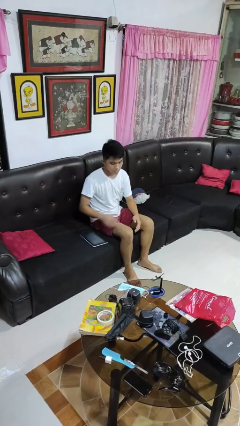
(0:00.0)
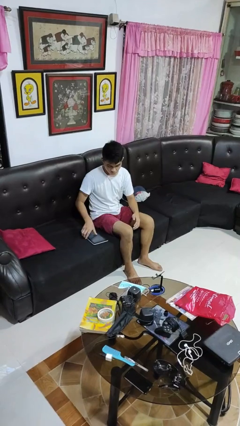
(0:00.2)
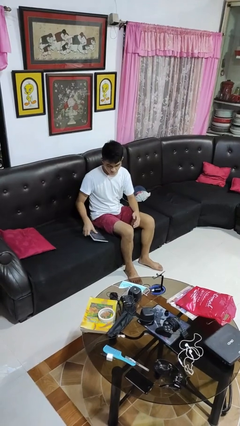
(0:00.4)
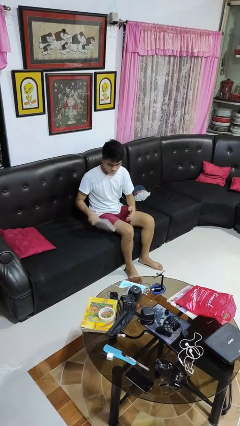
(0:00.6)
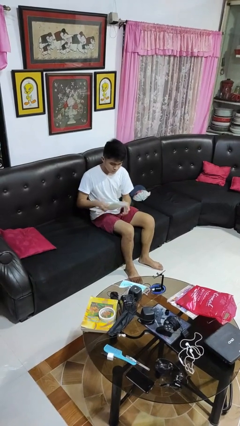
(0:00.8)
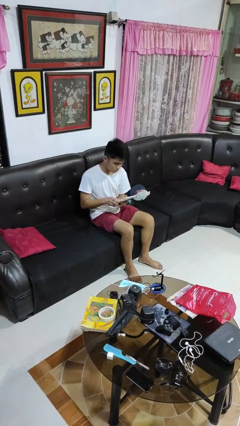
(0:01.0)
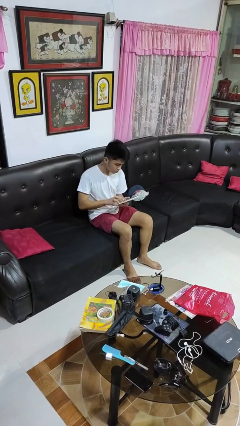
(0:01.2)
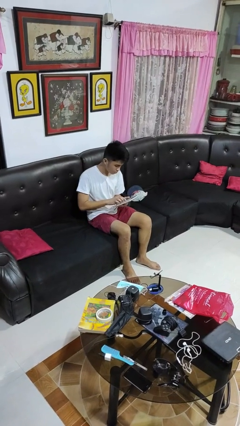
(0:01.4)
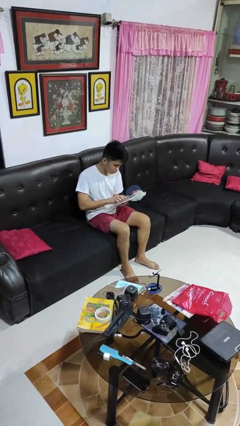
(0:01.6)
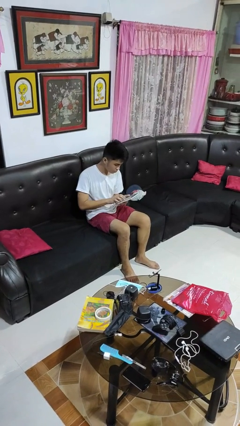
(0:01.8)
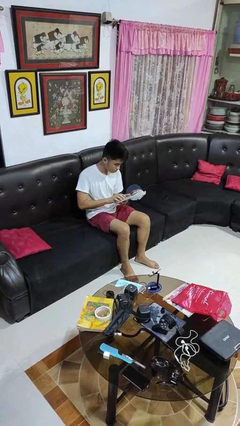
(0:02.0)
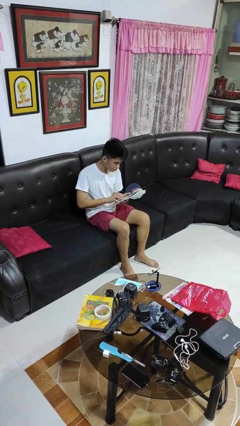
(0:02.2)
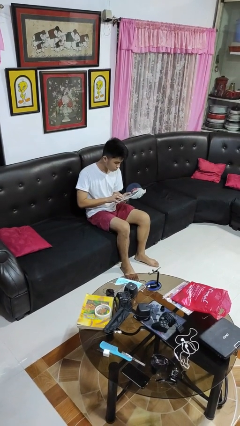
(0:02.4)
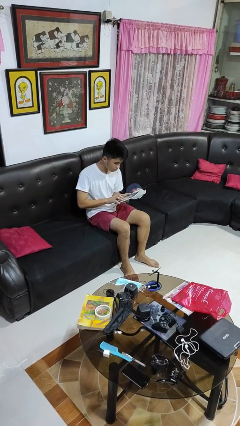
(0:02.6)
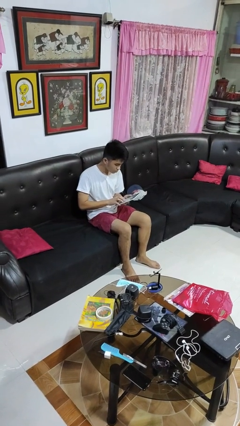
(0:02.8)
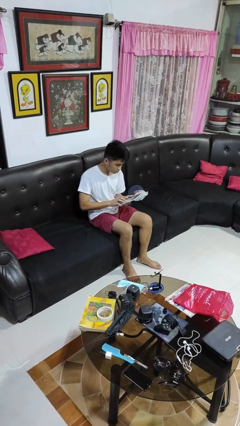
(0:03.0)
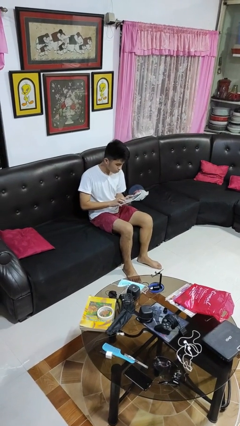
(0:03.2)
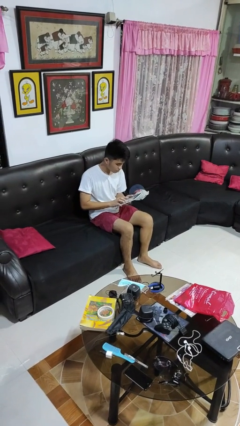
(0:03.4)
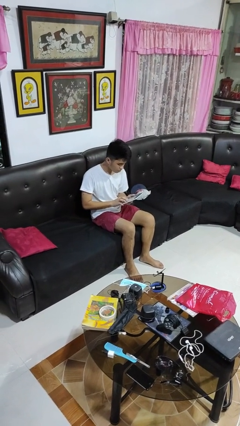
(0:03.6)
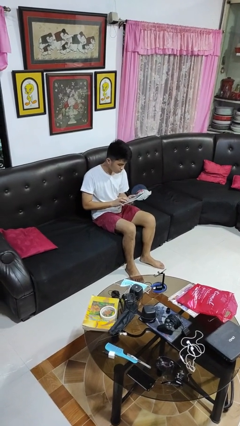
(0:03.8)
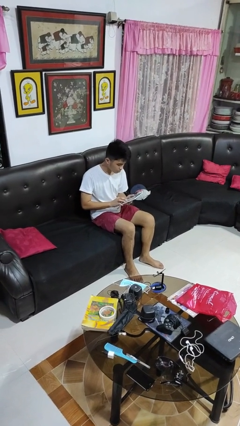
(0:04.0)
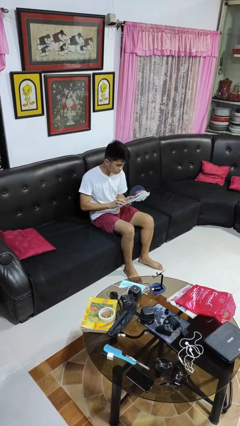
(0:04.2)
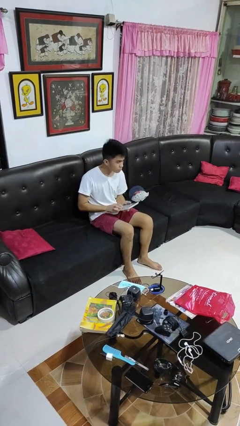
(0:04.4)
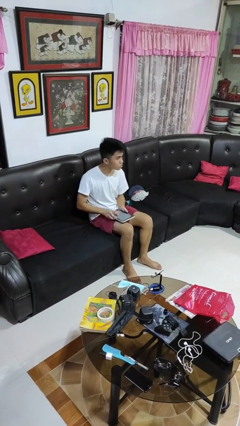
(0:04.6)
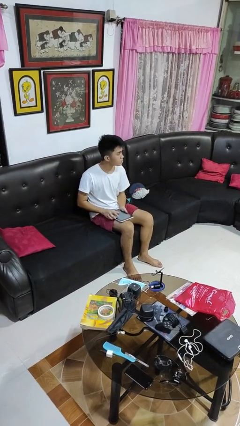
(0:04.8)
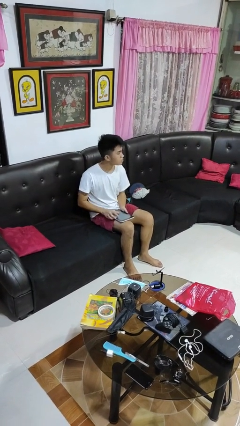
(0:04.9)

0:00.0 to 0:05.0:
person interacts with tablet

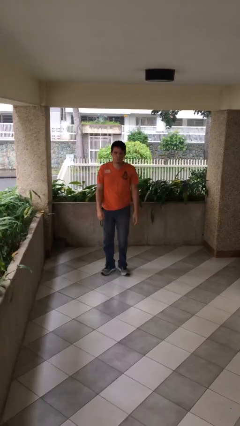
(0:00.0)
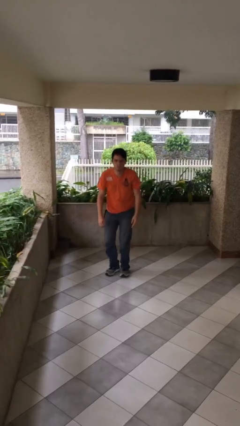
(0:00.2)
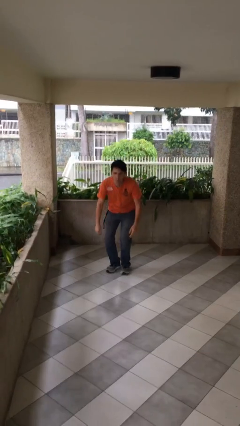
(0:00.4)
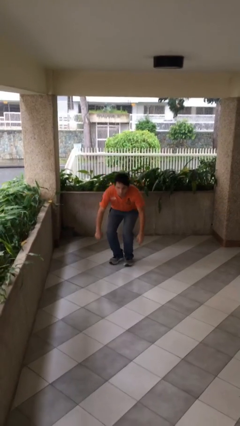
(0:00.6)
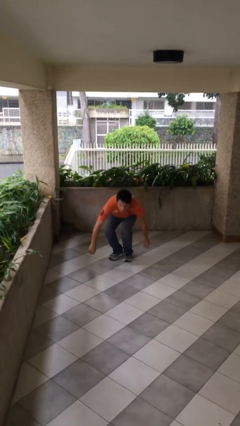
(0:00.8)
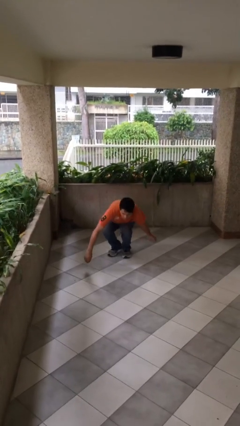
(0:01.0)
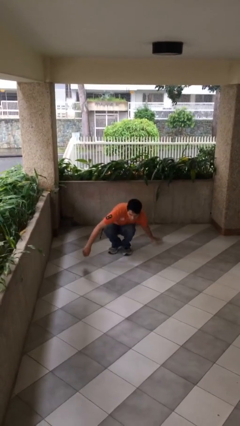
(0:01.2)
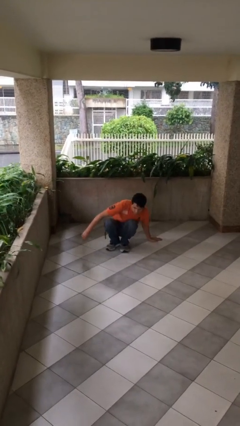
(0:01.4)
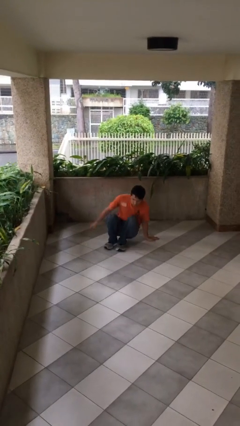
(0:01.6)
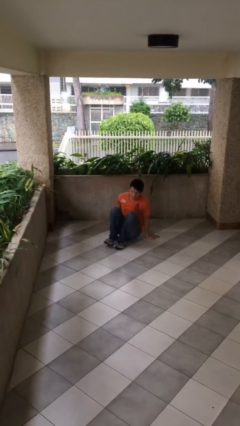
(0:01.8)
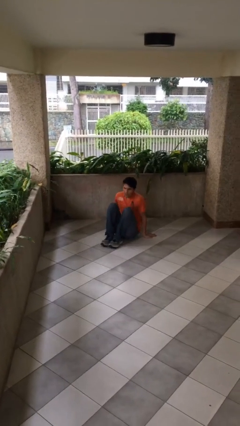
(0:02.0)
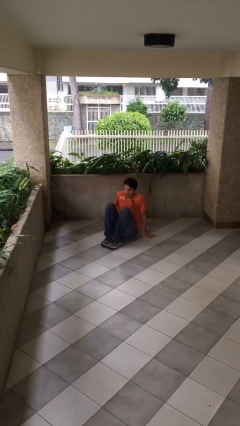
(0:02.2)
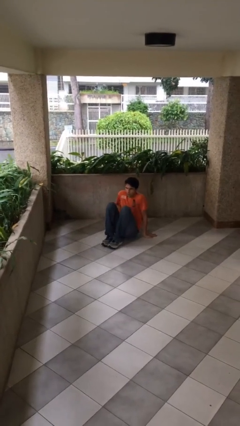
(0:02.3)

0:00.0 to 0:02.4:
person sits down

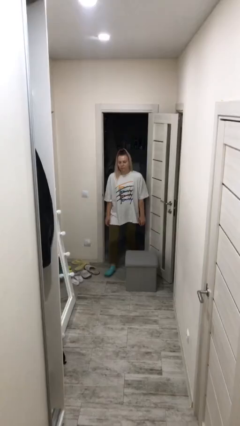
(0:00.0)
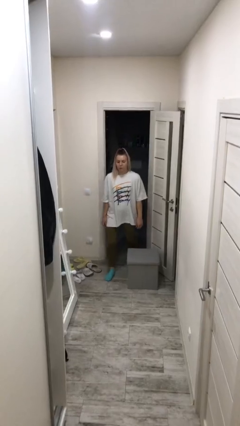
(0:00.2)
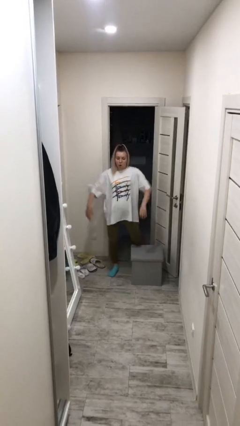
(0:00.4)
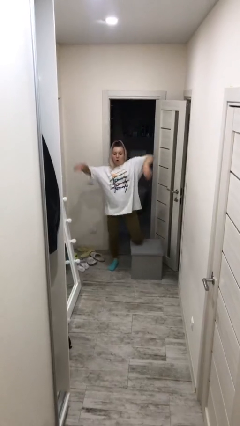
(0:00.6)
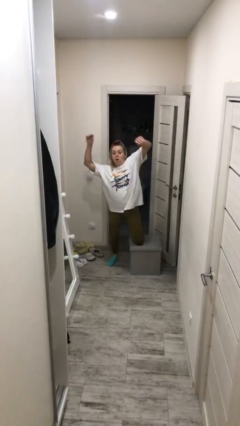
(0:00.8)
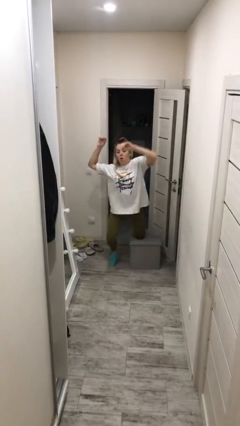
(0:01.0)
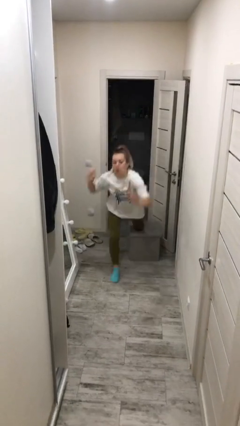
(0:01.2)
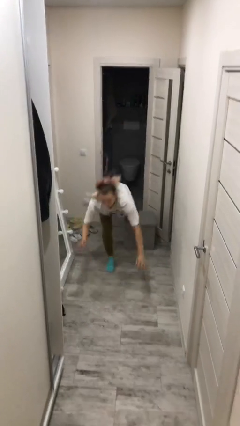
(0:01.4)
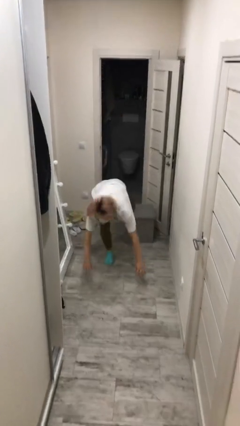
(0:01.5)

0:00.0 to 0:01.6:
person trips on object on floor

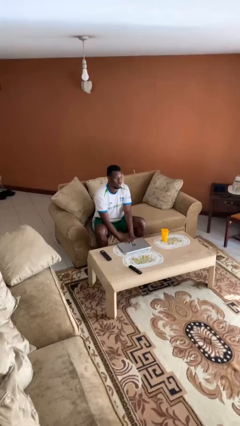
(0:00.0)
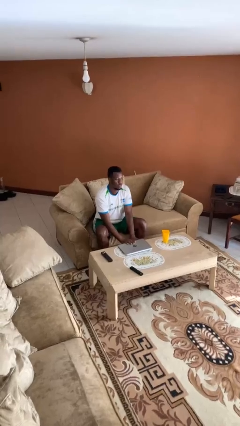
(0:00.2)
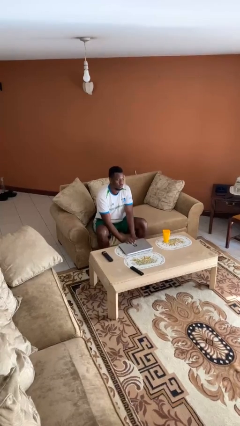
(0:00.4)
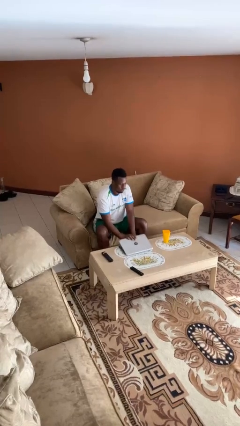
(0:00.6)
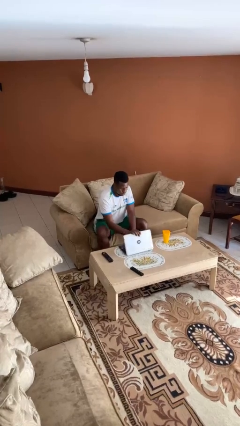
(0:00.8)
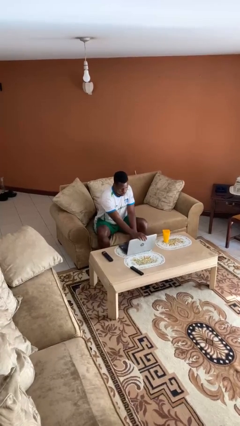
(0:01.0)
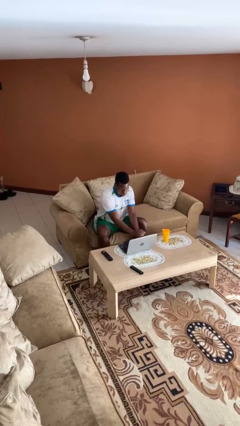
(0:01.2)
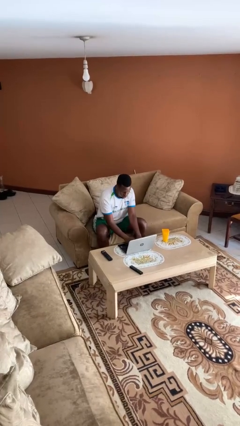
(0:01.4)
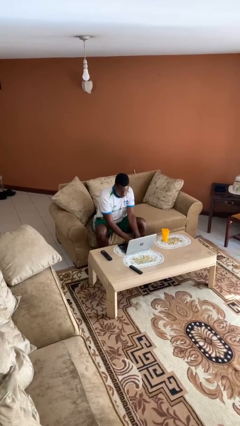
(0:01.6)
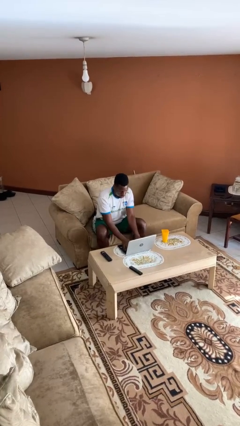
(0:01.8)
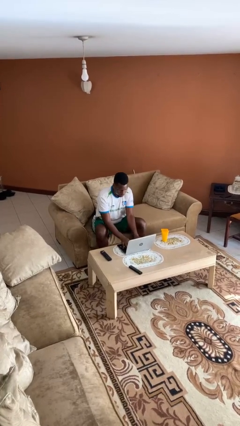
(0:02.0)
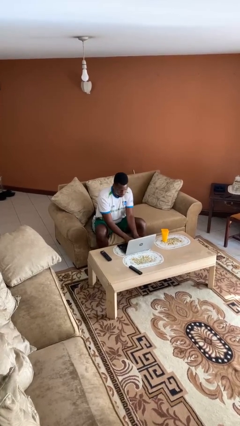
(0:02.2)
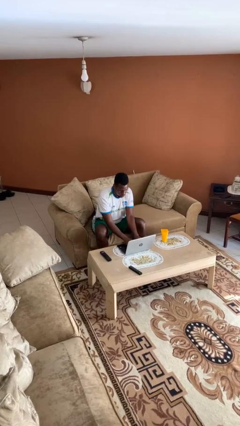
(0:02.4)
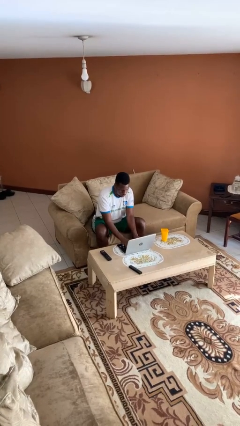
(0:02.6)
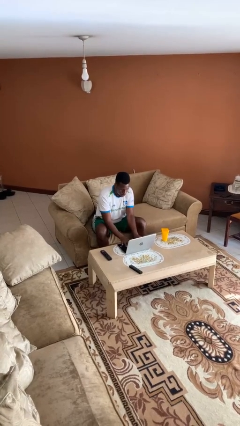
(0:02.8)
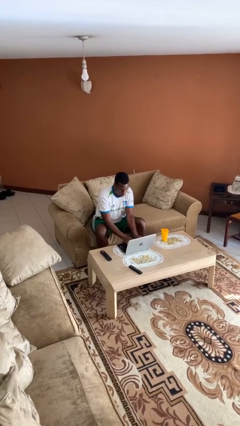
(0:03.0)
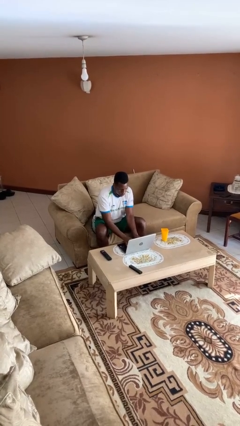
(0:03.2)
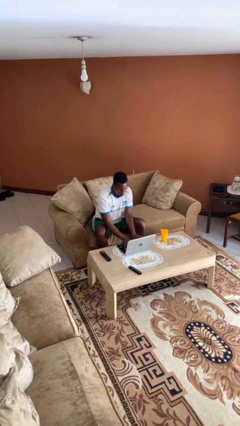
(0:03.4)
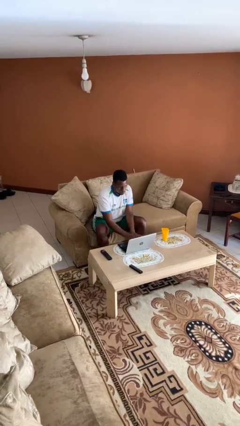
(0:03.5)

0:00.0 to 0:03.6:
person interacts with laptop

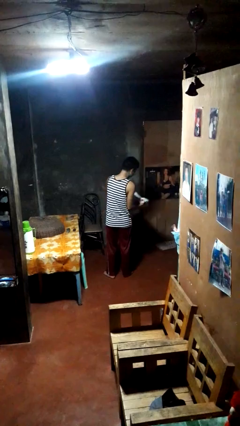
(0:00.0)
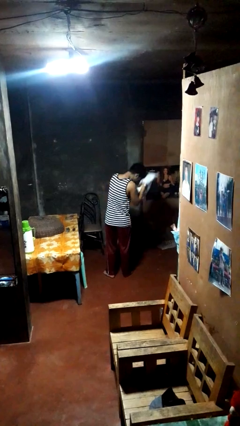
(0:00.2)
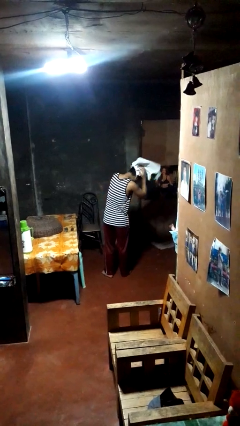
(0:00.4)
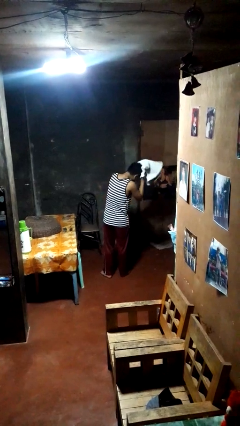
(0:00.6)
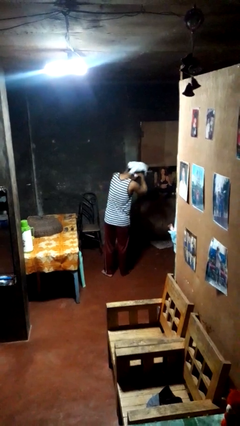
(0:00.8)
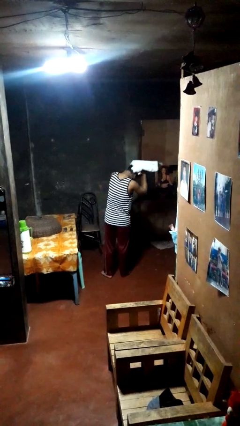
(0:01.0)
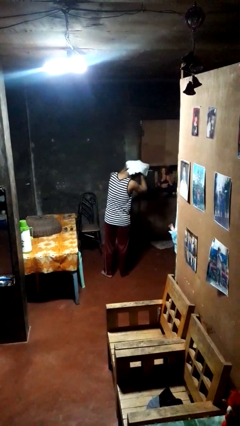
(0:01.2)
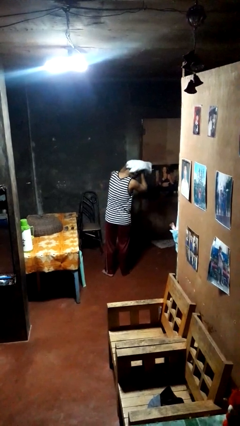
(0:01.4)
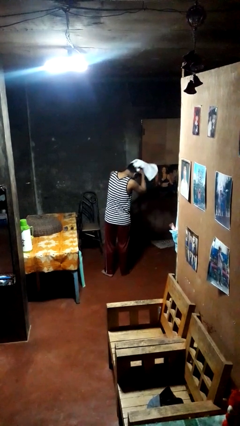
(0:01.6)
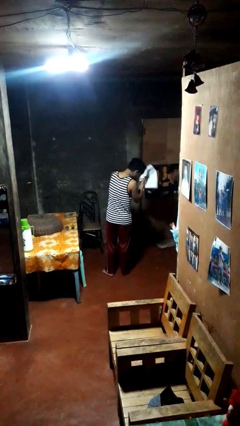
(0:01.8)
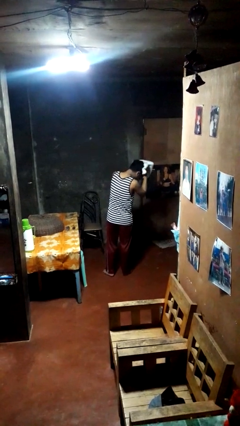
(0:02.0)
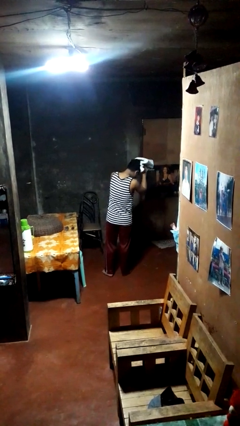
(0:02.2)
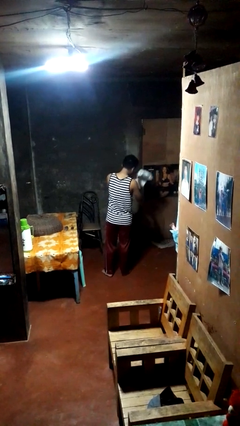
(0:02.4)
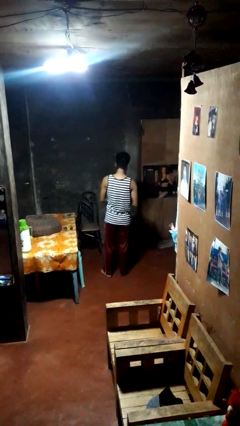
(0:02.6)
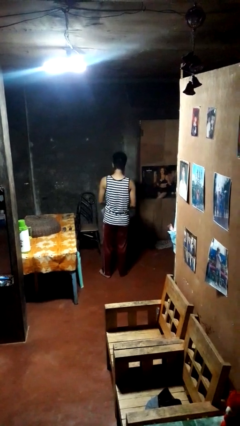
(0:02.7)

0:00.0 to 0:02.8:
person dries hair with towel

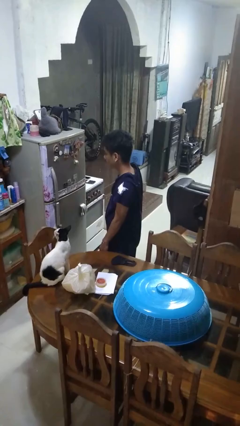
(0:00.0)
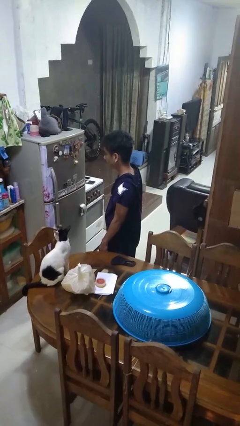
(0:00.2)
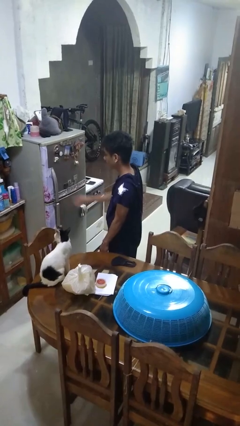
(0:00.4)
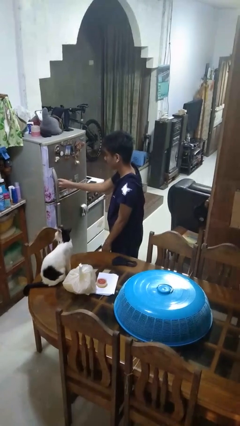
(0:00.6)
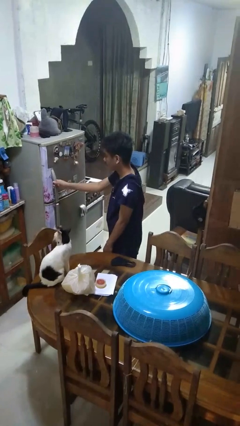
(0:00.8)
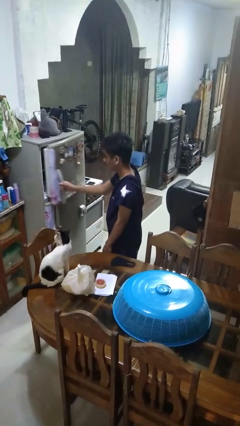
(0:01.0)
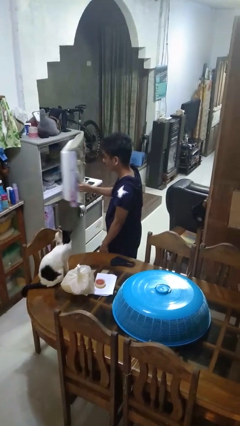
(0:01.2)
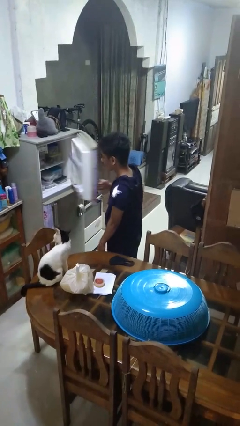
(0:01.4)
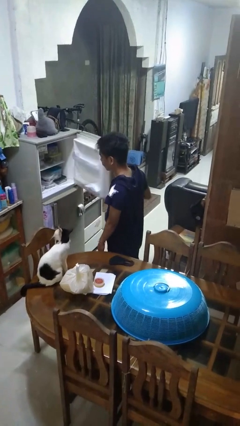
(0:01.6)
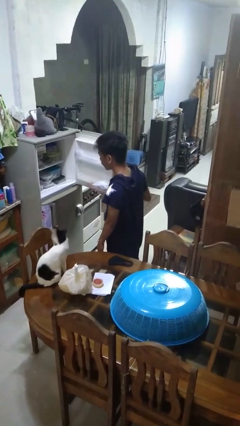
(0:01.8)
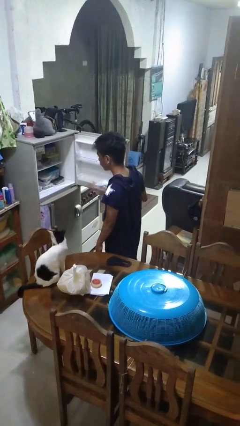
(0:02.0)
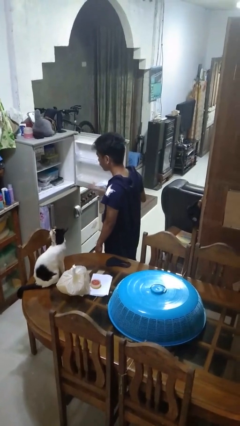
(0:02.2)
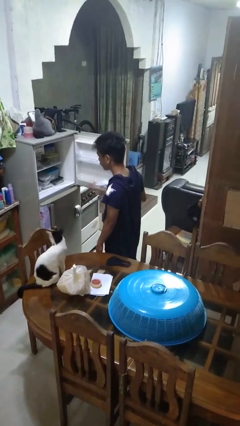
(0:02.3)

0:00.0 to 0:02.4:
person opens refrigerator

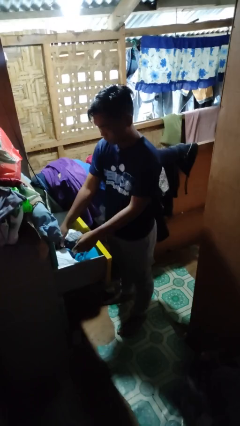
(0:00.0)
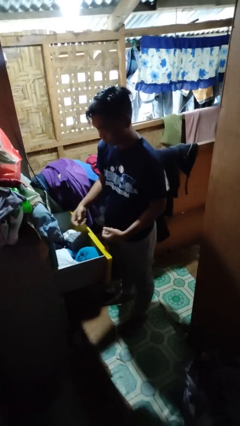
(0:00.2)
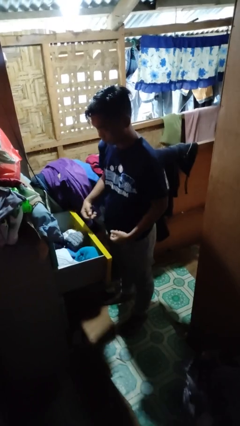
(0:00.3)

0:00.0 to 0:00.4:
person puts clothes into dresser
